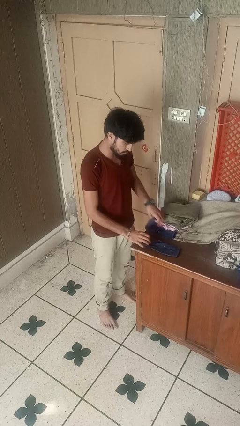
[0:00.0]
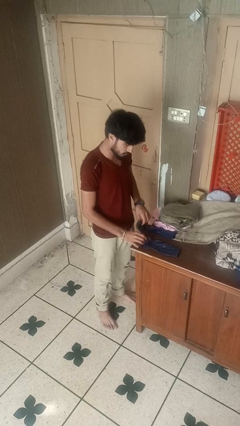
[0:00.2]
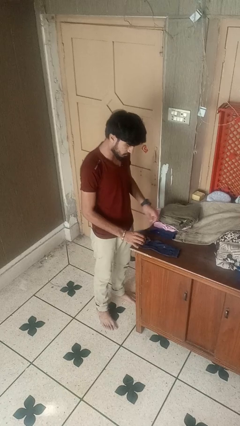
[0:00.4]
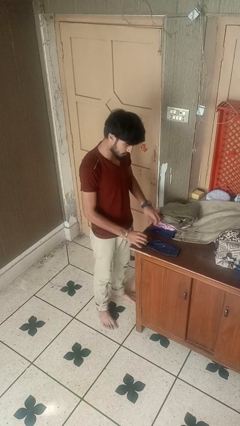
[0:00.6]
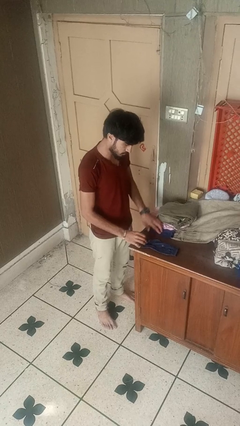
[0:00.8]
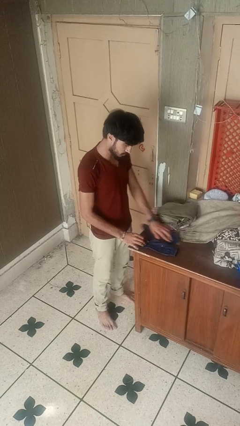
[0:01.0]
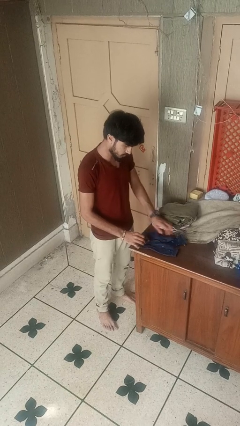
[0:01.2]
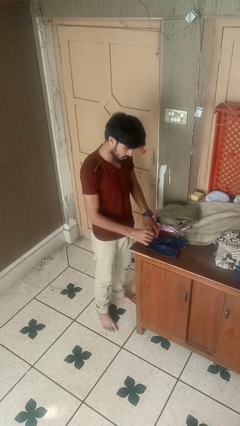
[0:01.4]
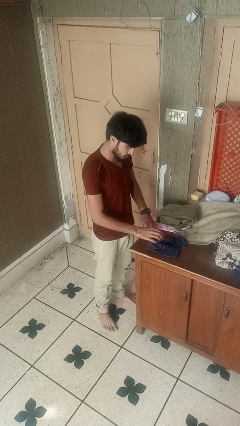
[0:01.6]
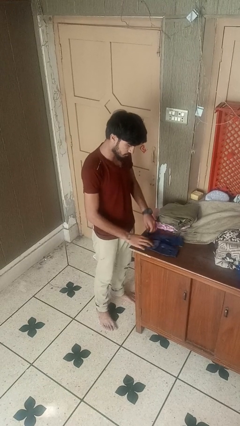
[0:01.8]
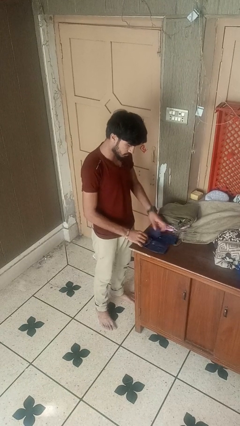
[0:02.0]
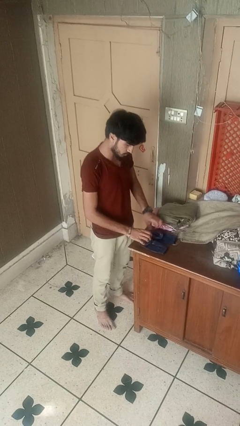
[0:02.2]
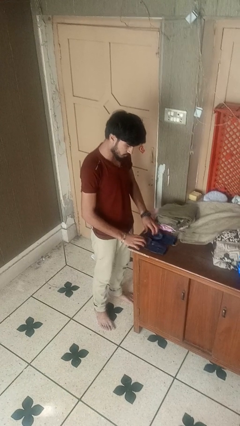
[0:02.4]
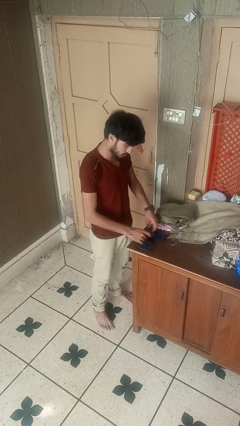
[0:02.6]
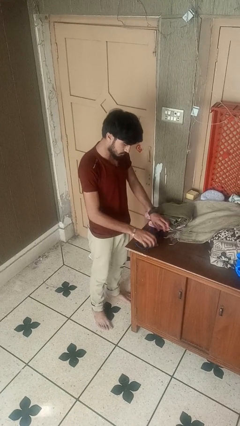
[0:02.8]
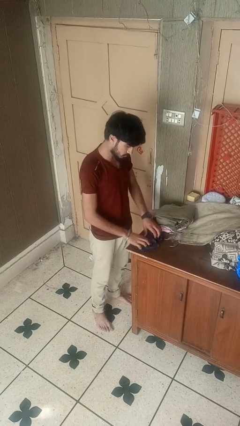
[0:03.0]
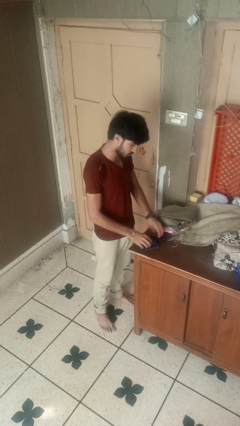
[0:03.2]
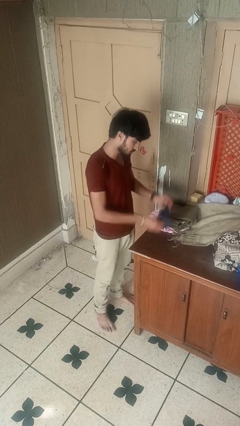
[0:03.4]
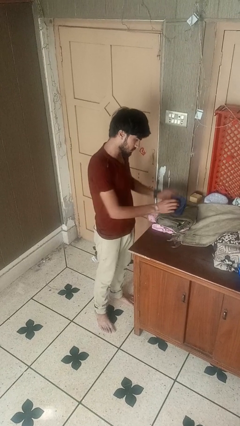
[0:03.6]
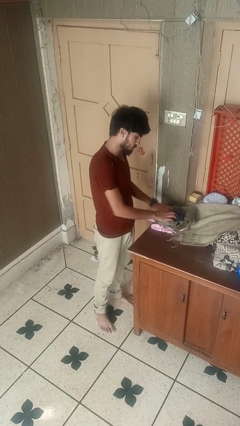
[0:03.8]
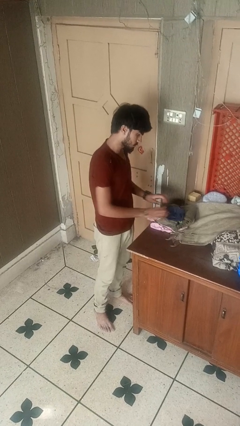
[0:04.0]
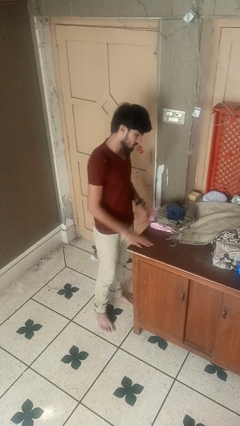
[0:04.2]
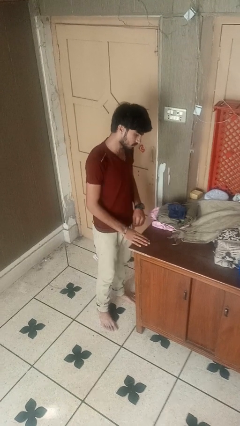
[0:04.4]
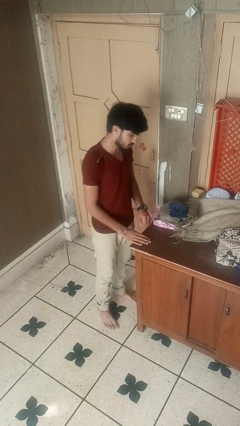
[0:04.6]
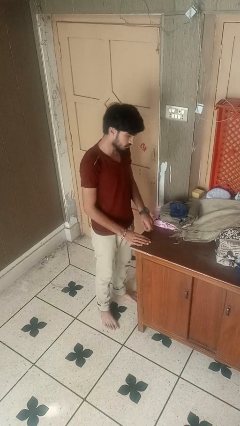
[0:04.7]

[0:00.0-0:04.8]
person folds socks

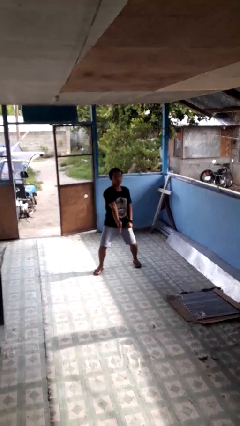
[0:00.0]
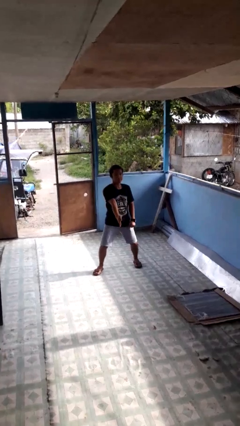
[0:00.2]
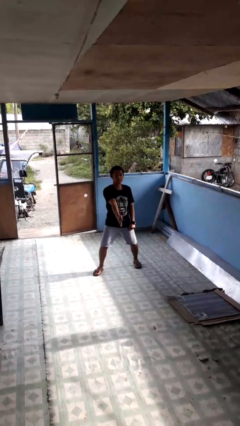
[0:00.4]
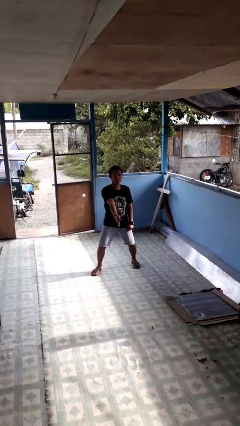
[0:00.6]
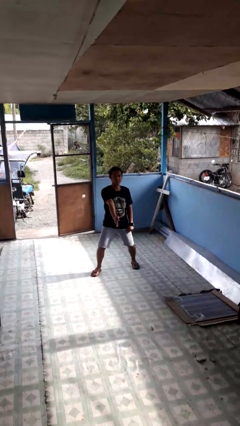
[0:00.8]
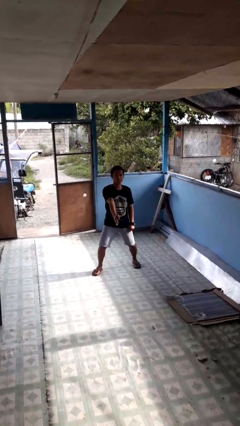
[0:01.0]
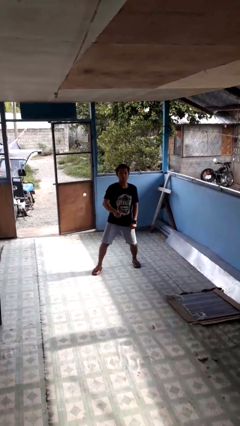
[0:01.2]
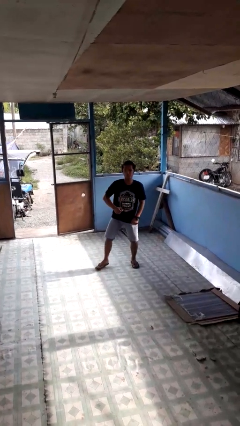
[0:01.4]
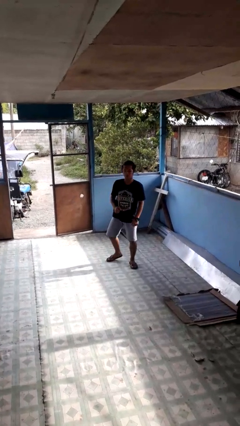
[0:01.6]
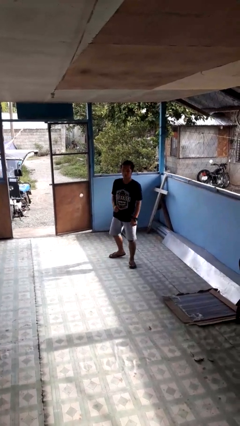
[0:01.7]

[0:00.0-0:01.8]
person karate chop

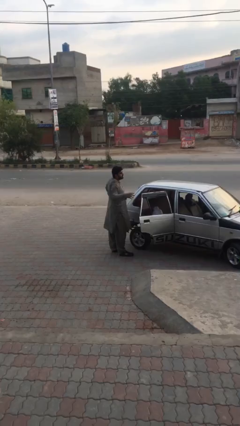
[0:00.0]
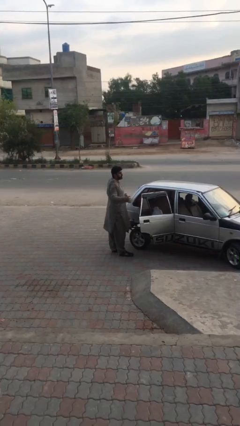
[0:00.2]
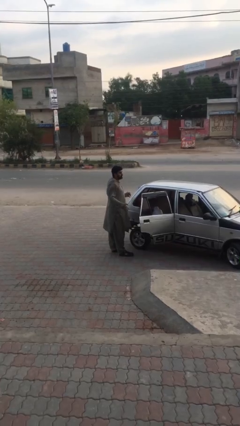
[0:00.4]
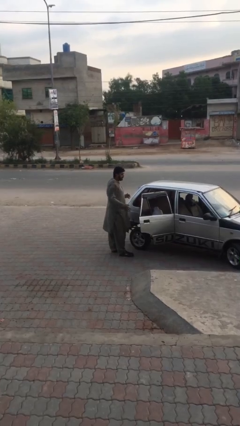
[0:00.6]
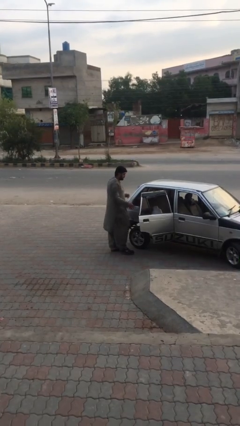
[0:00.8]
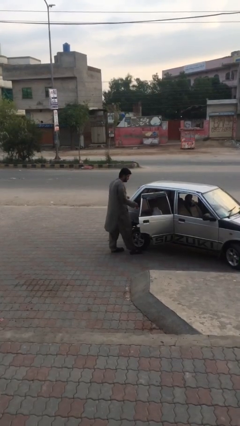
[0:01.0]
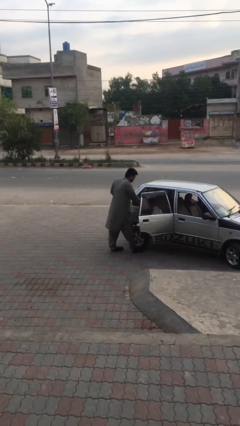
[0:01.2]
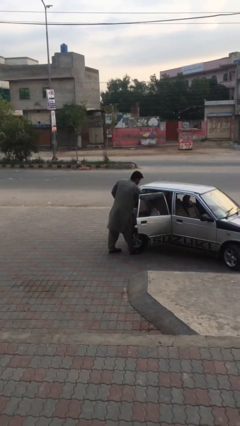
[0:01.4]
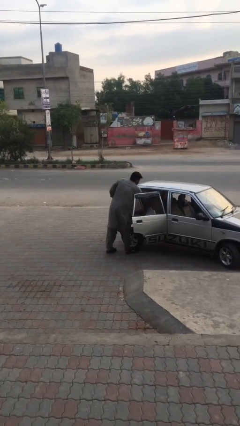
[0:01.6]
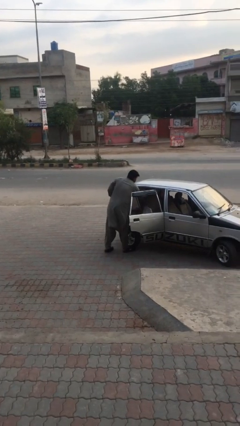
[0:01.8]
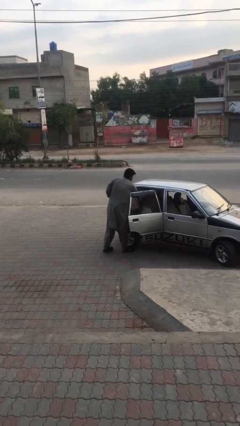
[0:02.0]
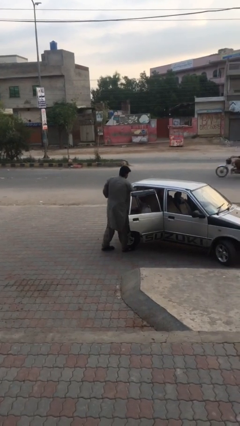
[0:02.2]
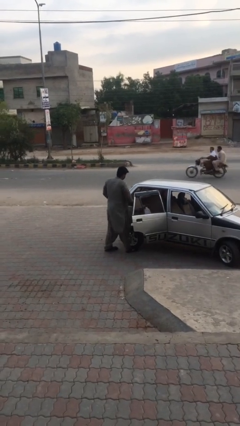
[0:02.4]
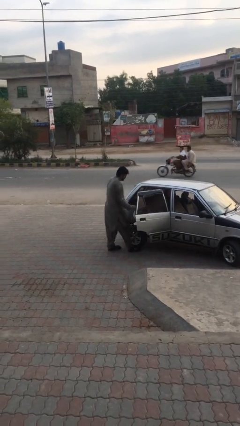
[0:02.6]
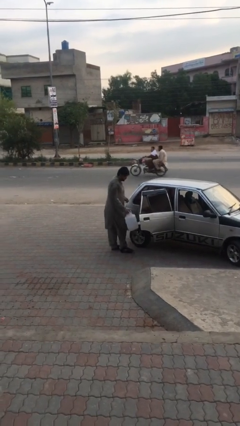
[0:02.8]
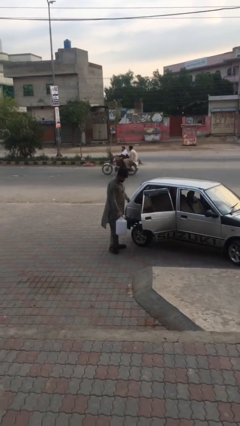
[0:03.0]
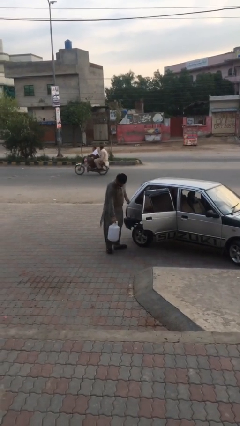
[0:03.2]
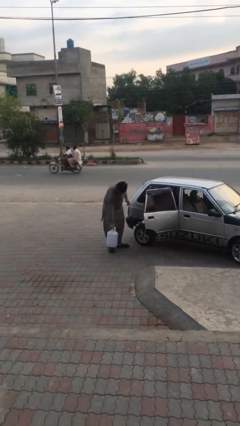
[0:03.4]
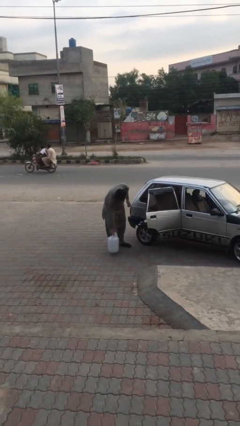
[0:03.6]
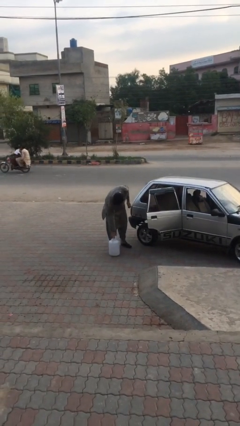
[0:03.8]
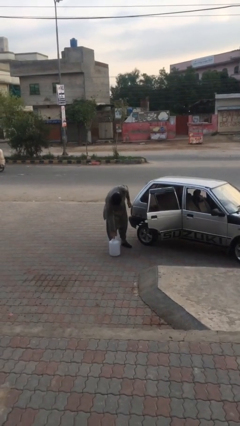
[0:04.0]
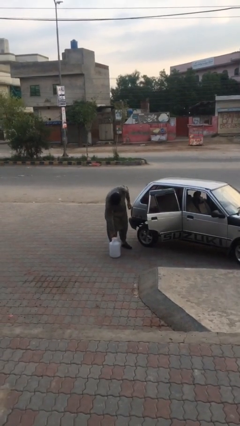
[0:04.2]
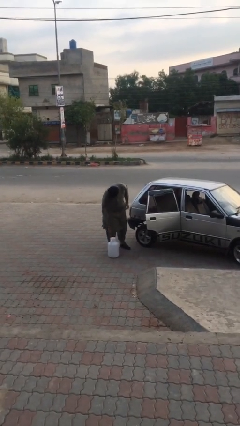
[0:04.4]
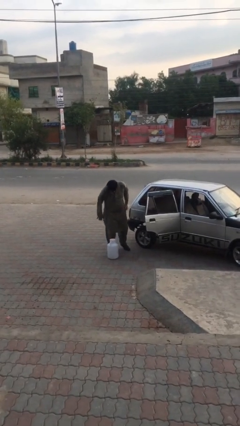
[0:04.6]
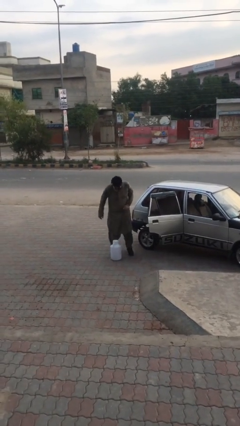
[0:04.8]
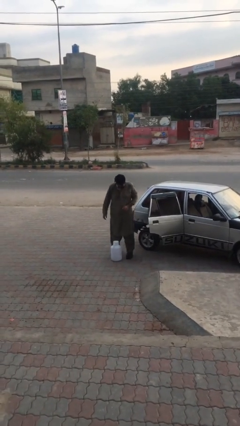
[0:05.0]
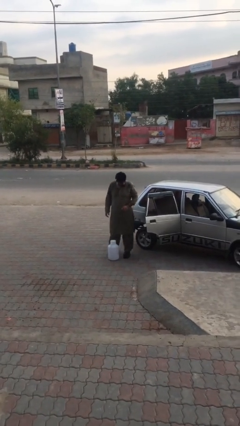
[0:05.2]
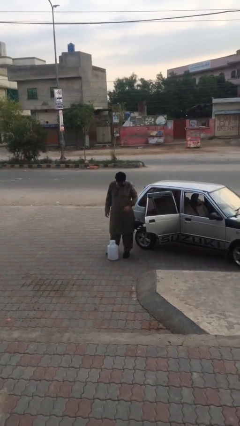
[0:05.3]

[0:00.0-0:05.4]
person unloads car

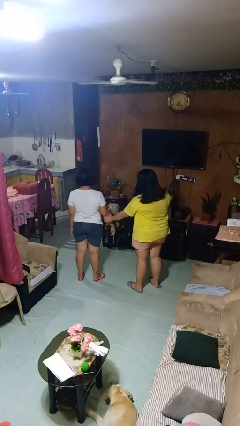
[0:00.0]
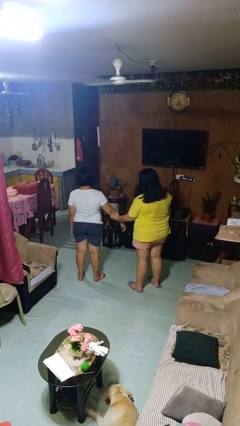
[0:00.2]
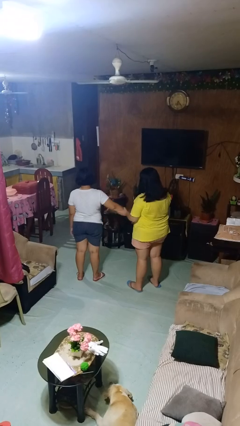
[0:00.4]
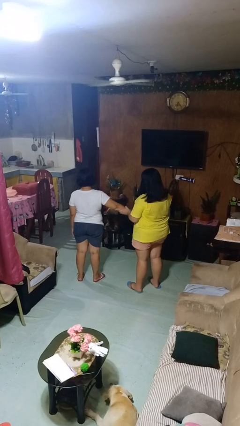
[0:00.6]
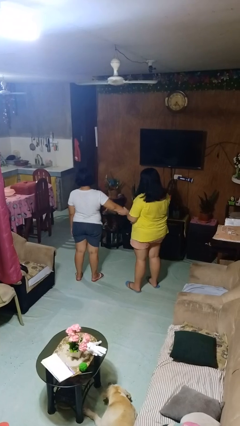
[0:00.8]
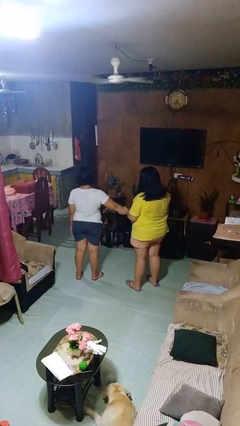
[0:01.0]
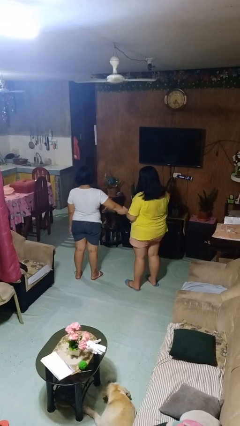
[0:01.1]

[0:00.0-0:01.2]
person grabs person by forearm

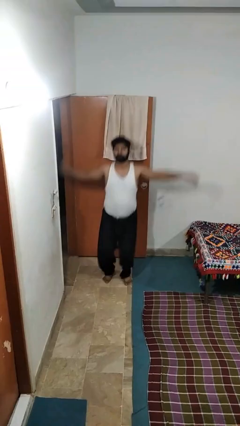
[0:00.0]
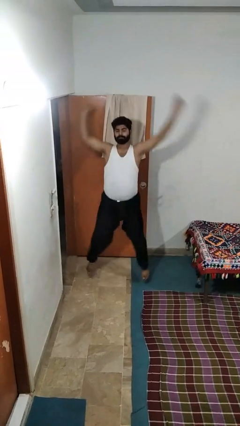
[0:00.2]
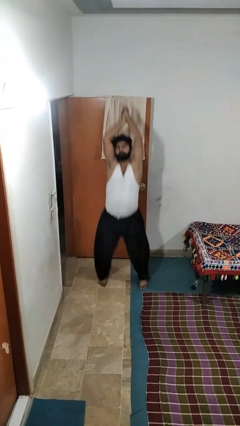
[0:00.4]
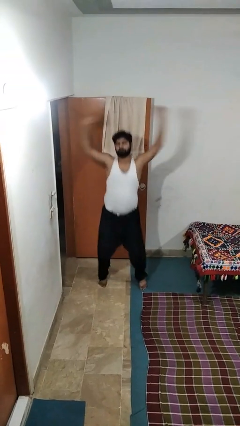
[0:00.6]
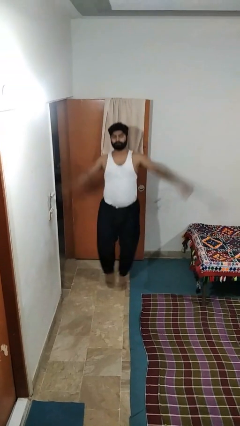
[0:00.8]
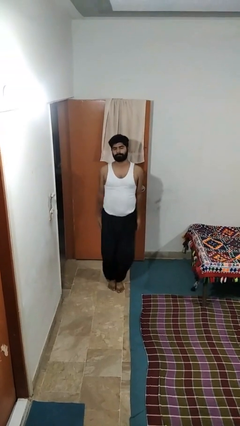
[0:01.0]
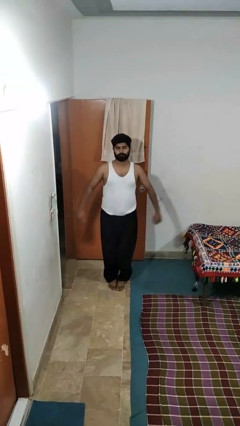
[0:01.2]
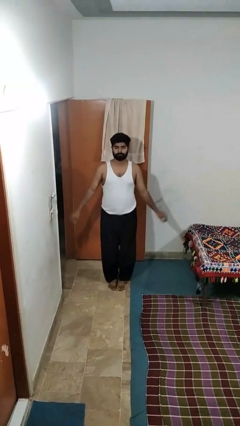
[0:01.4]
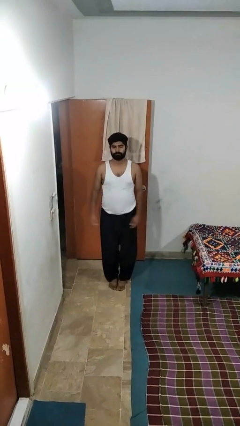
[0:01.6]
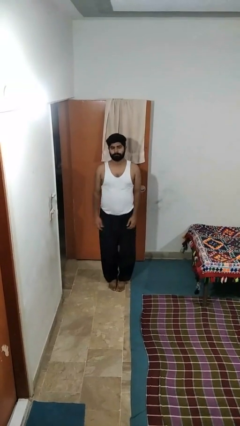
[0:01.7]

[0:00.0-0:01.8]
person exercises with jumping jacks

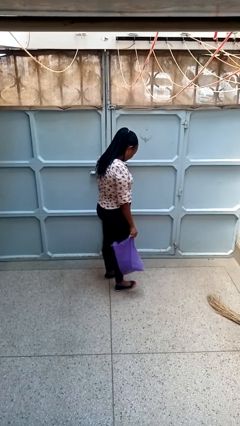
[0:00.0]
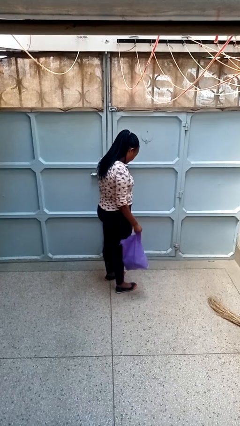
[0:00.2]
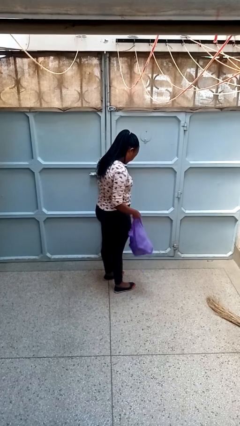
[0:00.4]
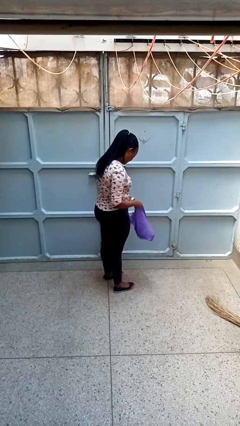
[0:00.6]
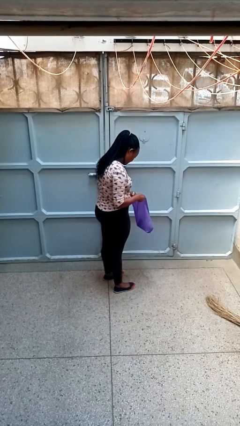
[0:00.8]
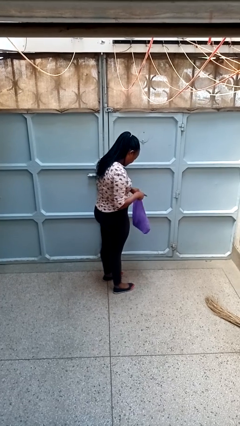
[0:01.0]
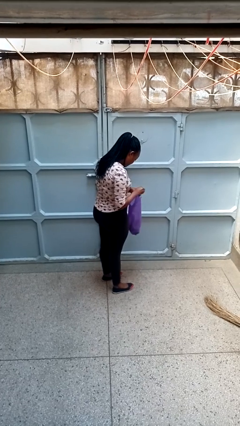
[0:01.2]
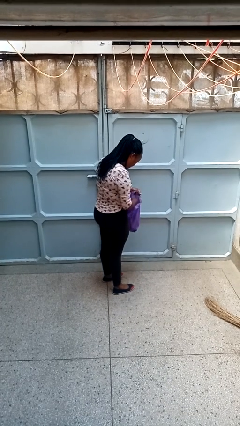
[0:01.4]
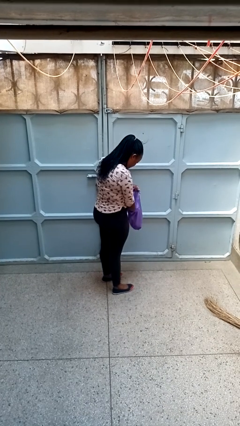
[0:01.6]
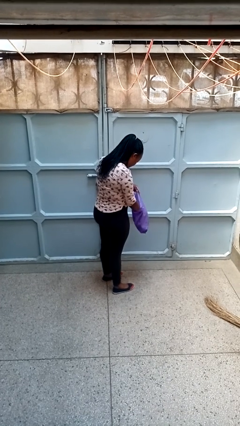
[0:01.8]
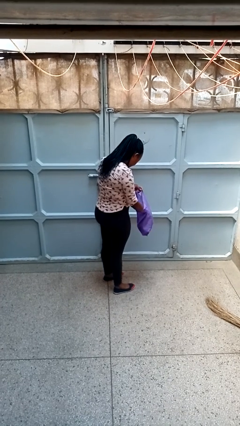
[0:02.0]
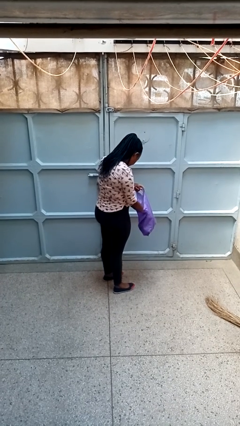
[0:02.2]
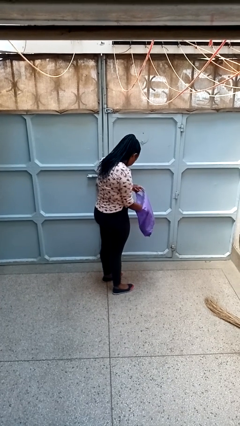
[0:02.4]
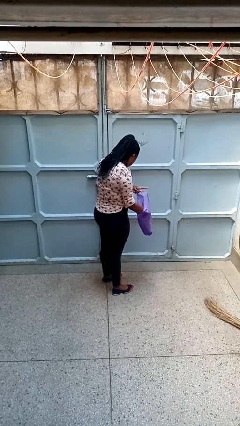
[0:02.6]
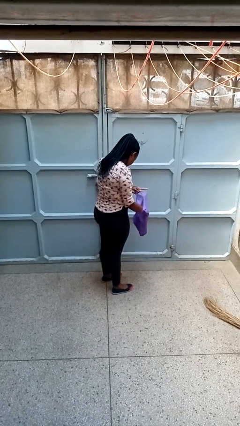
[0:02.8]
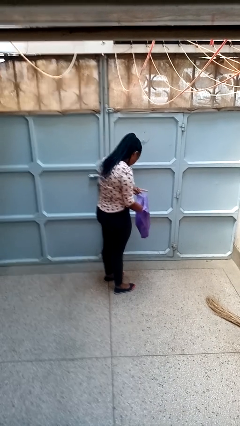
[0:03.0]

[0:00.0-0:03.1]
person searches in bag
